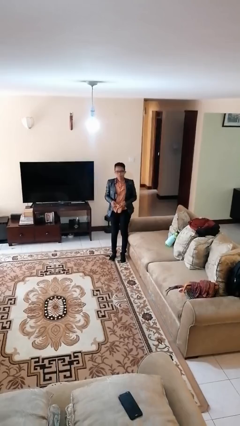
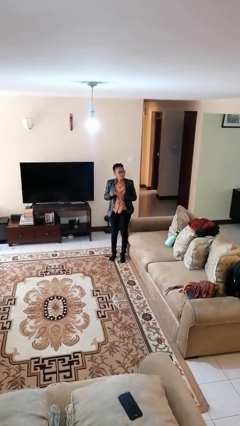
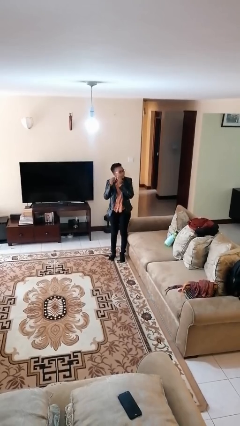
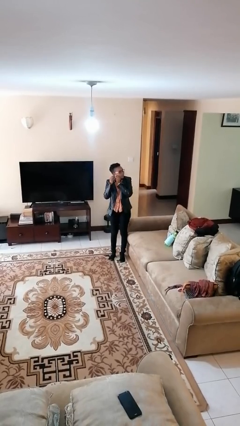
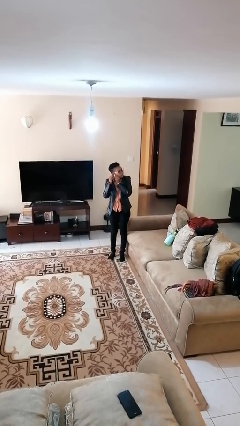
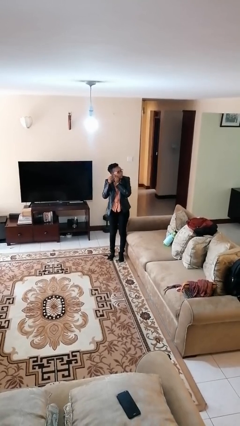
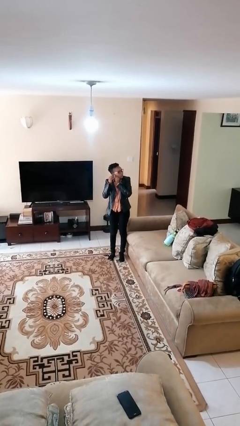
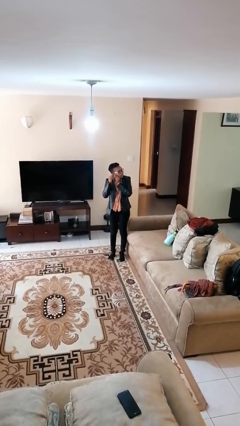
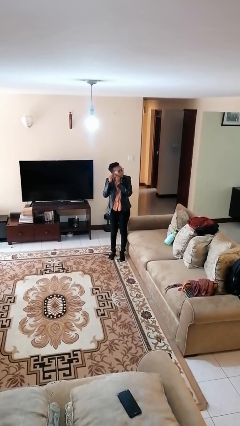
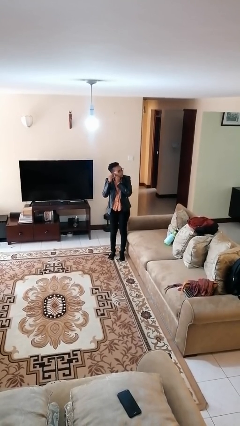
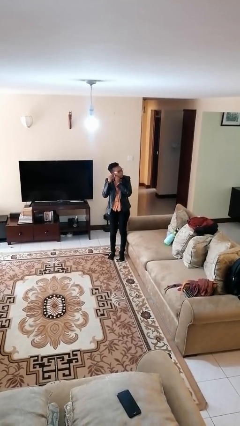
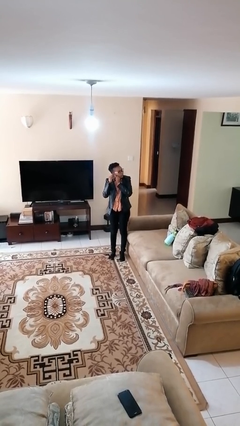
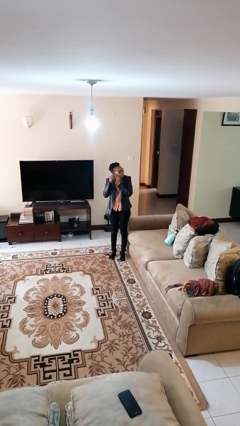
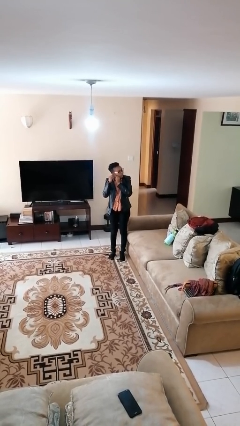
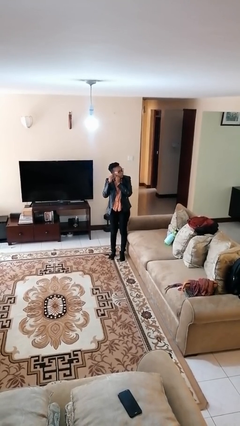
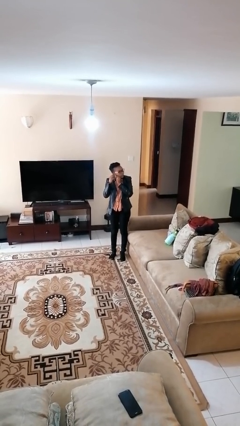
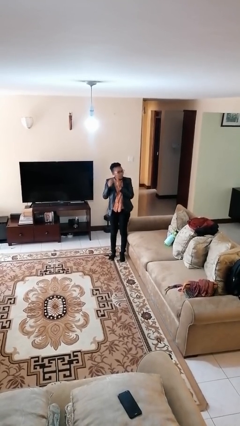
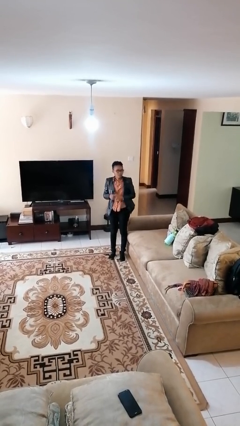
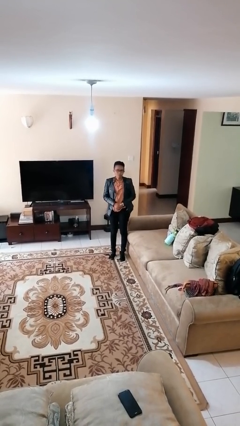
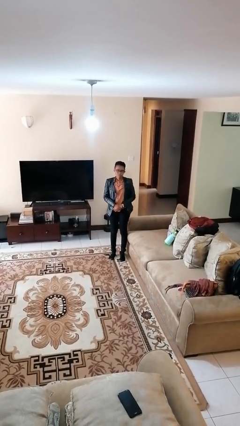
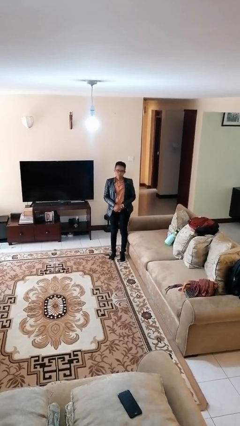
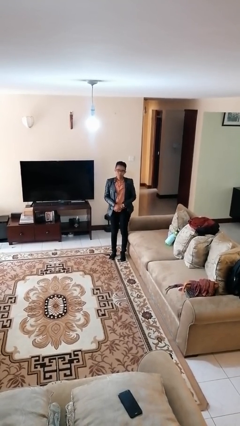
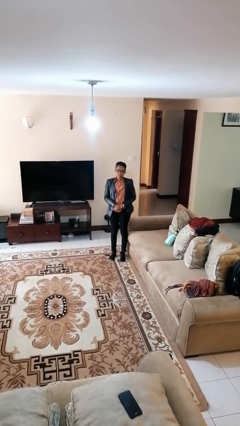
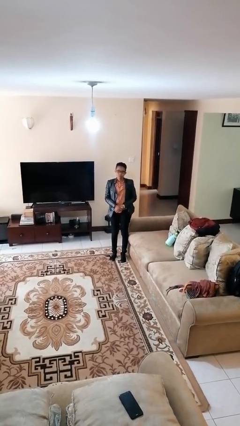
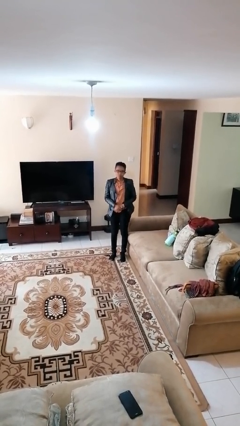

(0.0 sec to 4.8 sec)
person puts on earrings

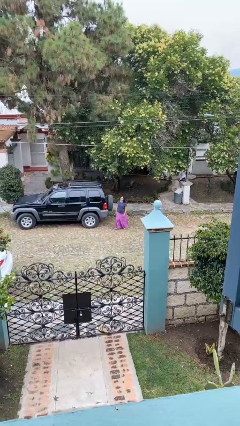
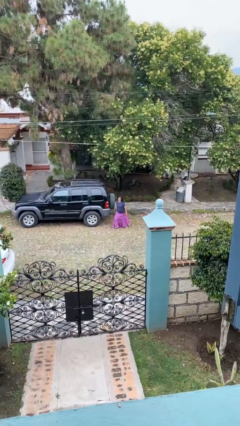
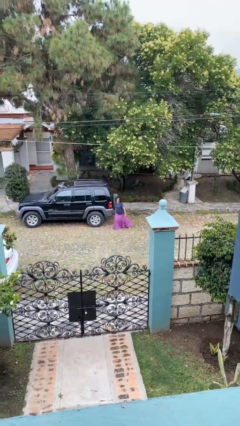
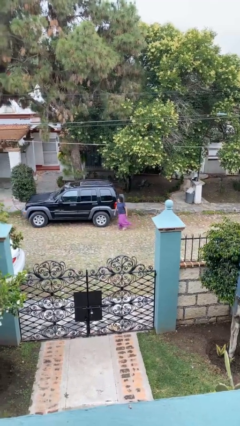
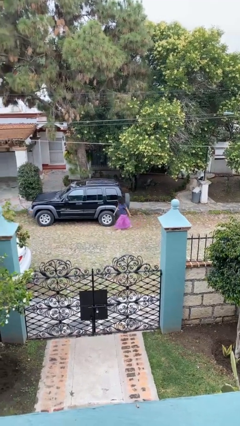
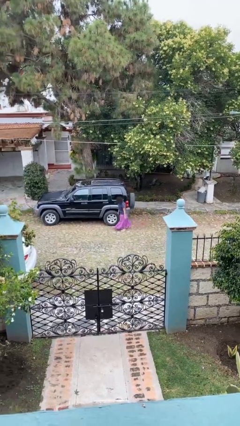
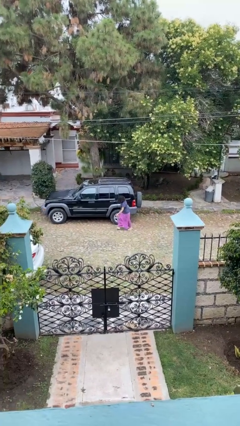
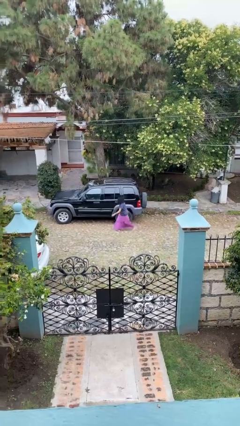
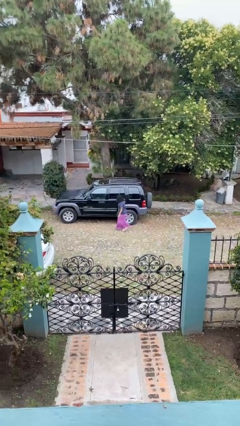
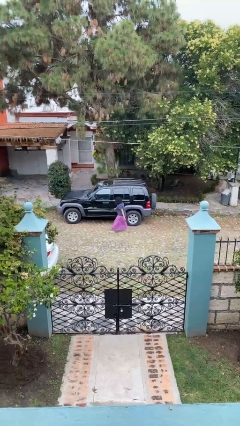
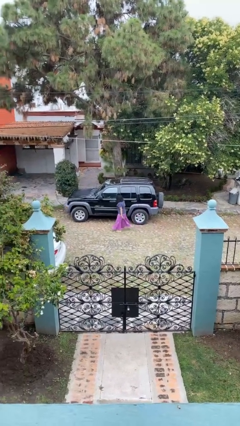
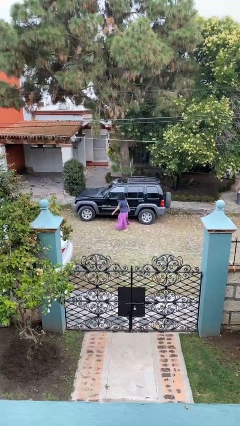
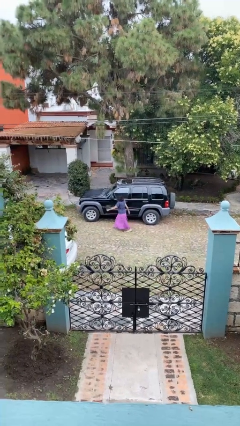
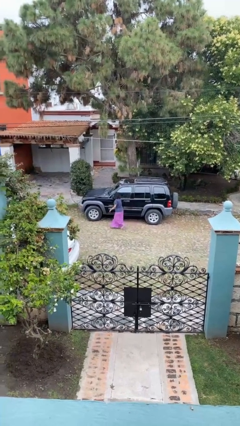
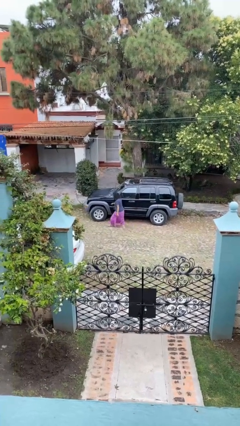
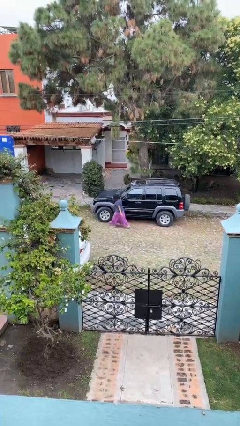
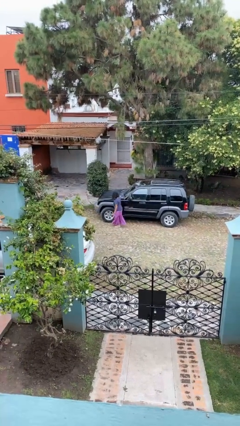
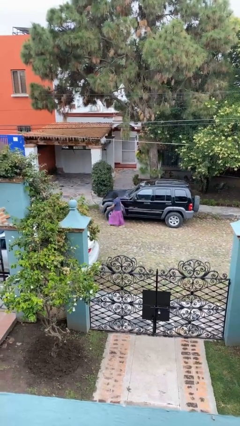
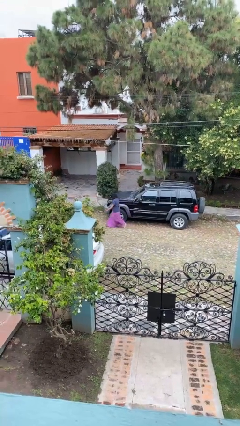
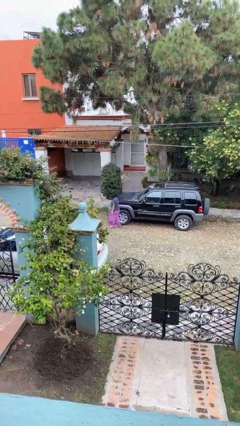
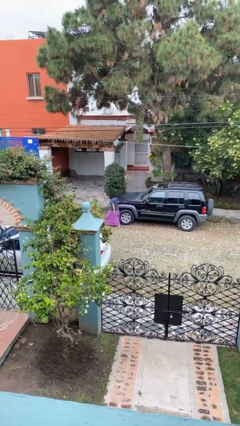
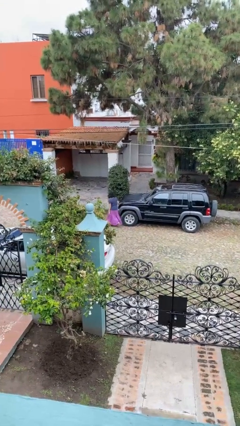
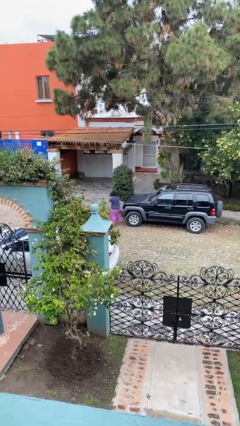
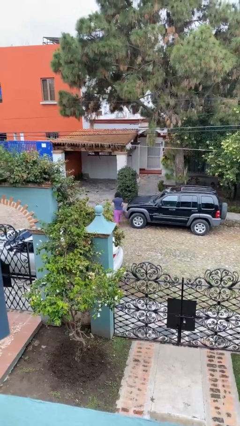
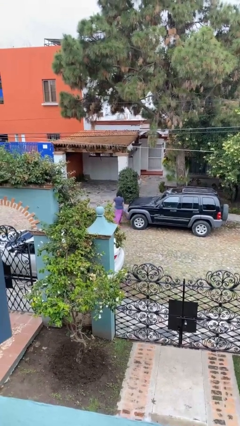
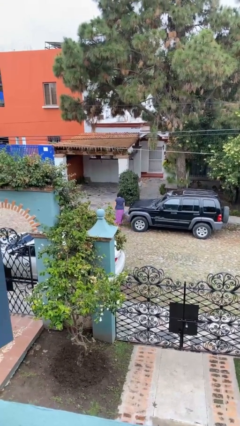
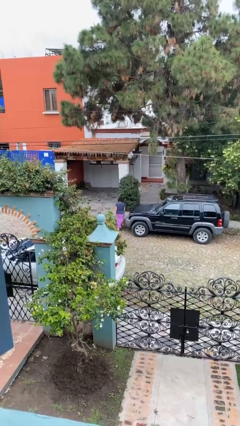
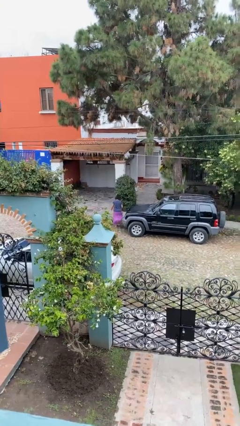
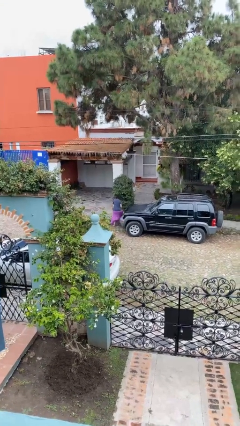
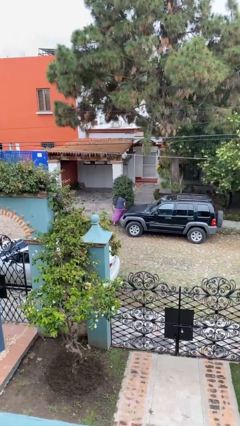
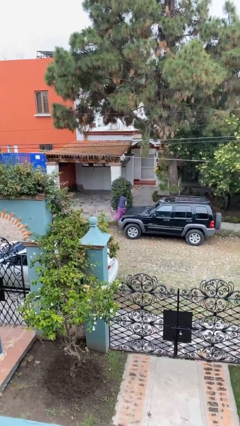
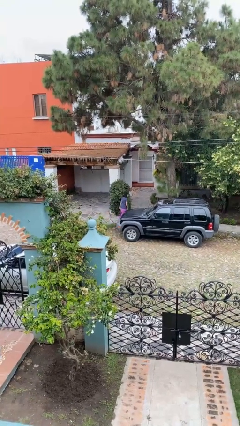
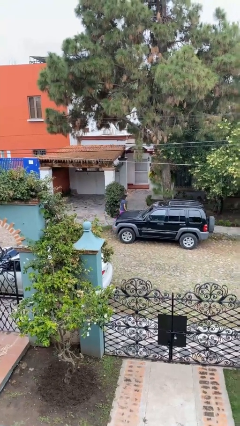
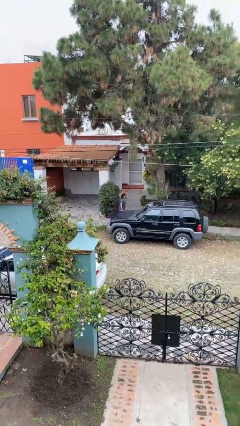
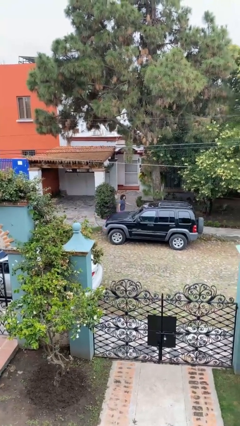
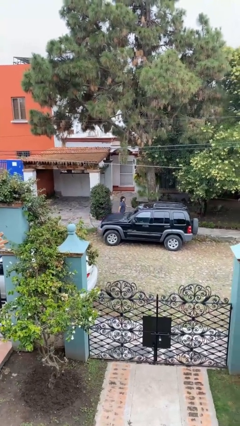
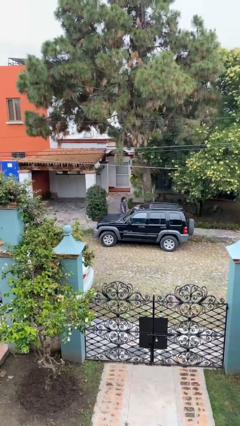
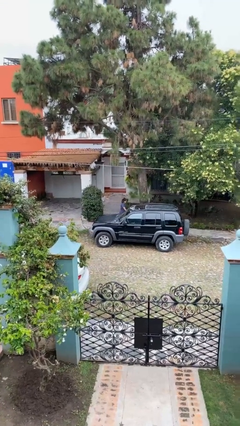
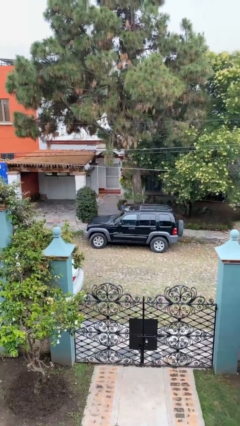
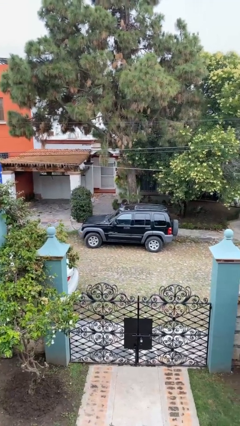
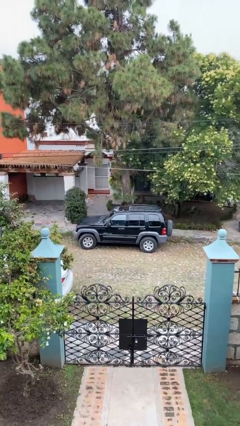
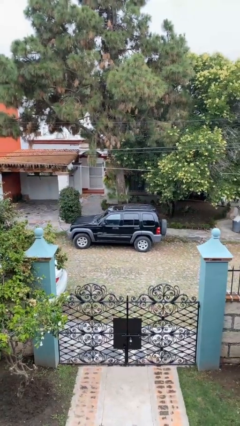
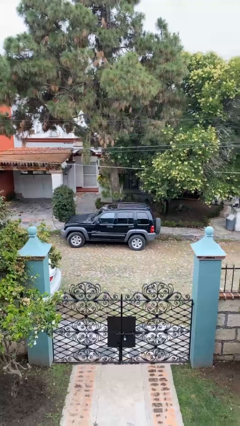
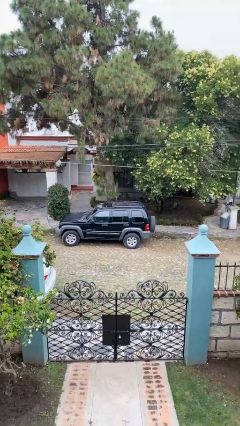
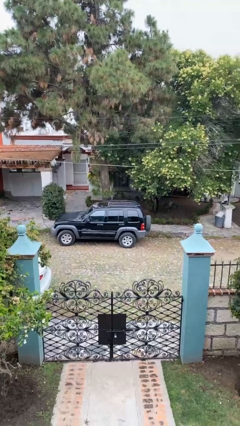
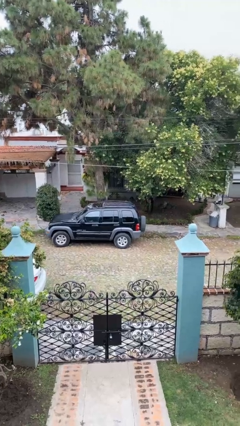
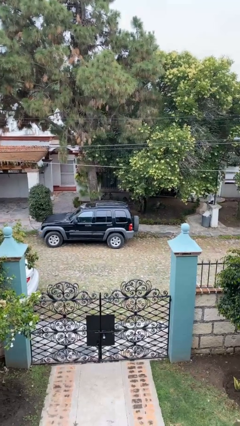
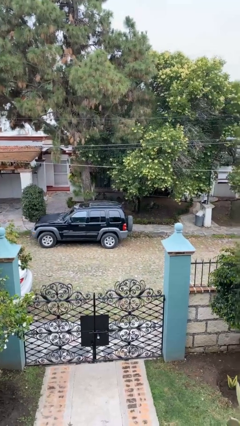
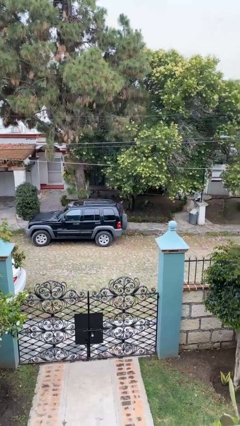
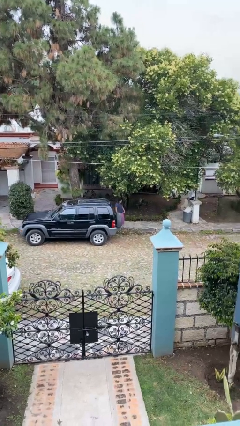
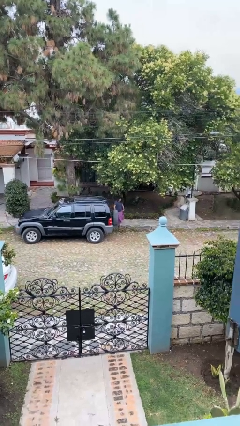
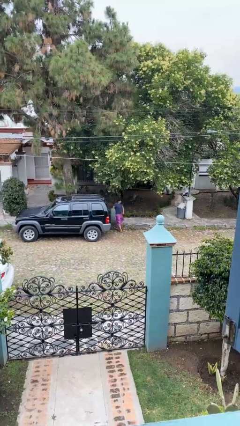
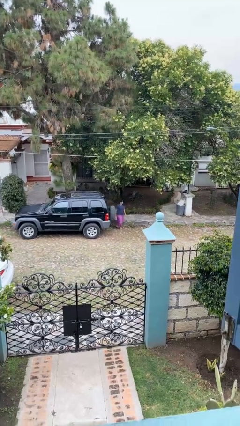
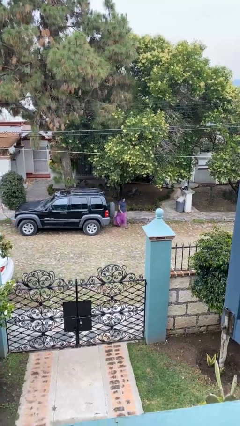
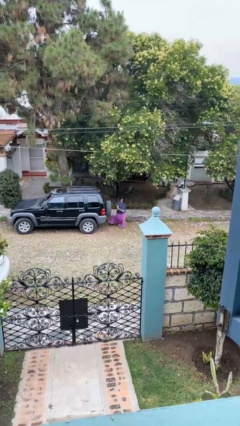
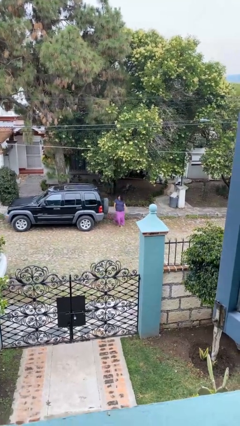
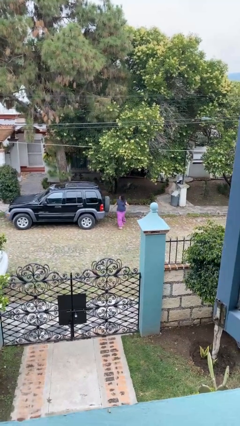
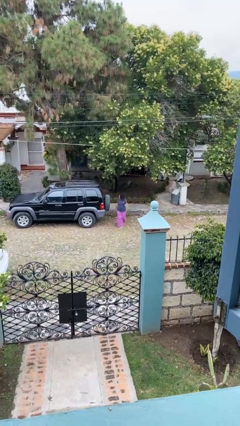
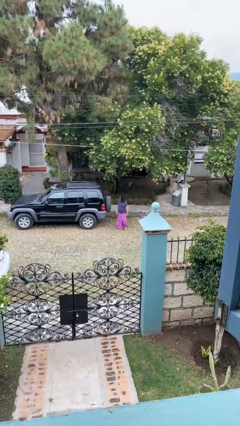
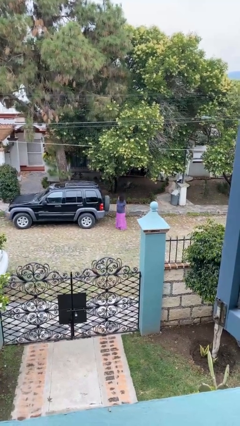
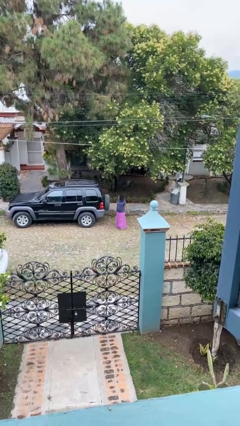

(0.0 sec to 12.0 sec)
person walks around car

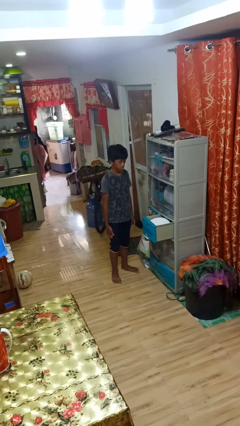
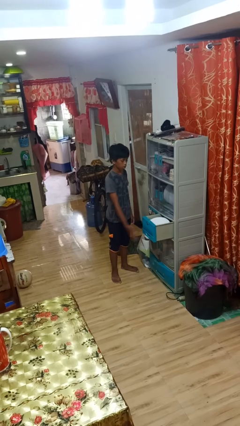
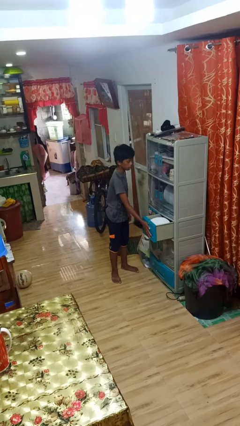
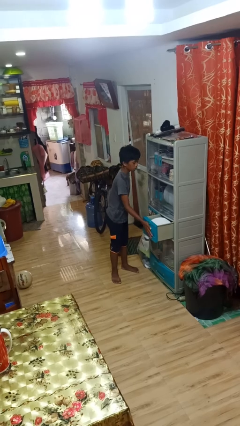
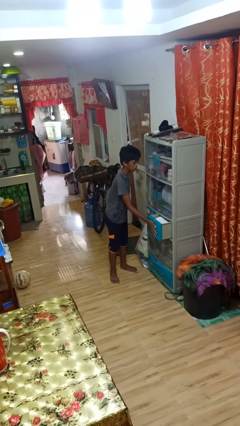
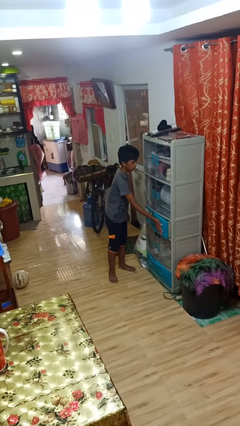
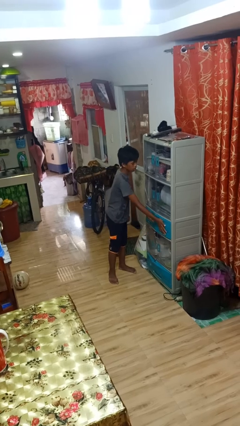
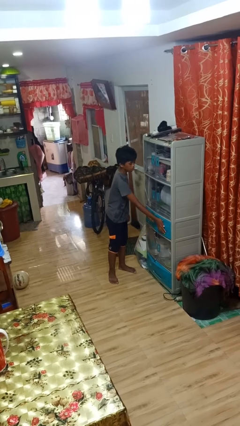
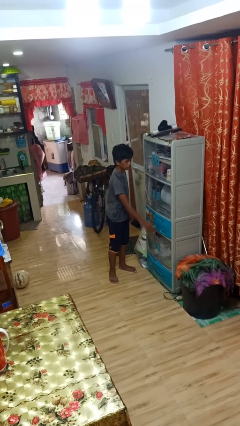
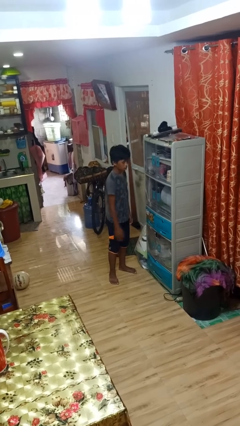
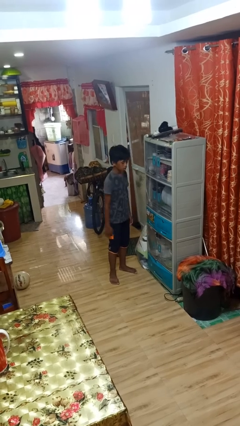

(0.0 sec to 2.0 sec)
person closes kitchen drawer
